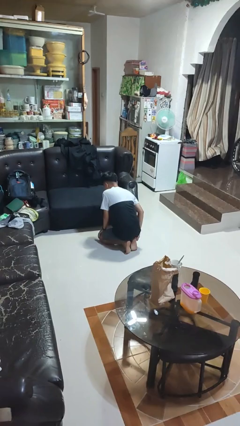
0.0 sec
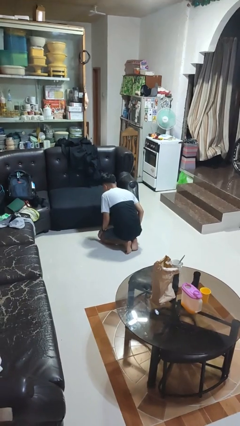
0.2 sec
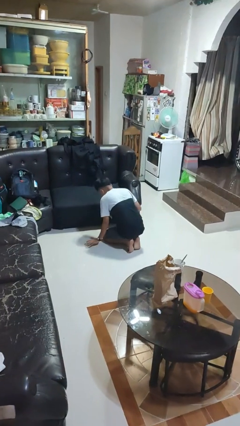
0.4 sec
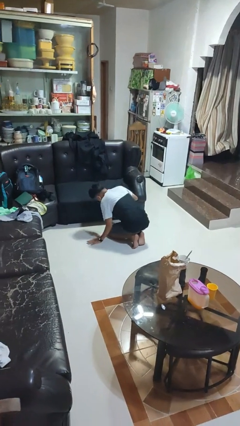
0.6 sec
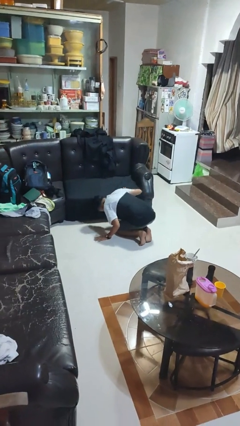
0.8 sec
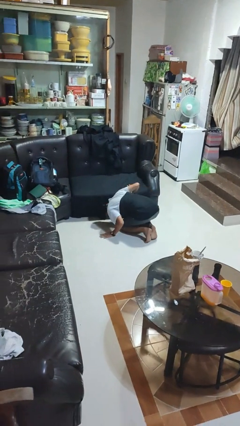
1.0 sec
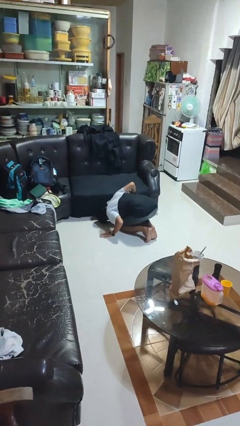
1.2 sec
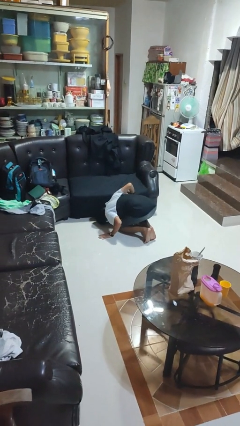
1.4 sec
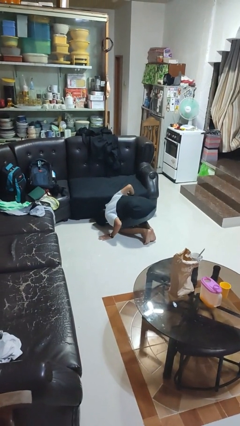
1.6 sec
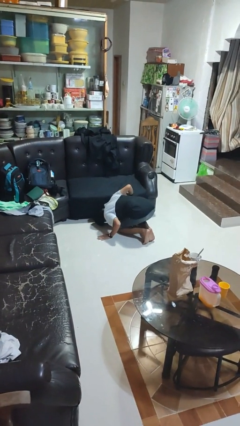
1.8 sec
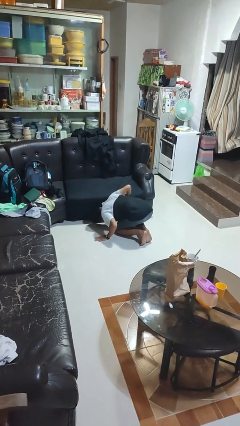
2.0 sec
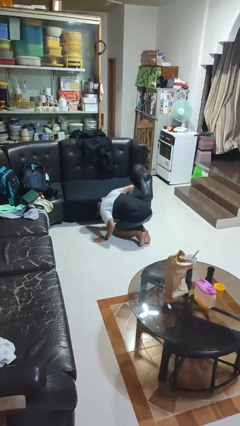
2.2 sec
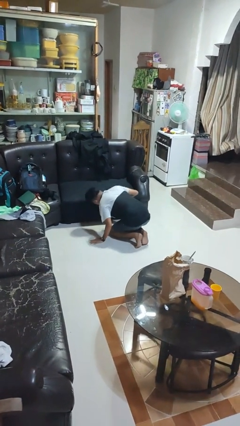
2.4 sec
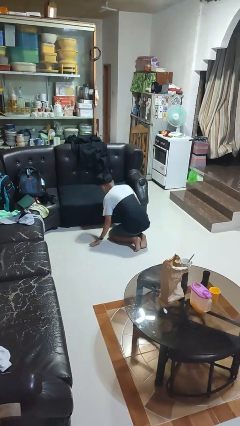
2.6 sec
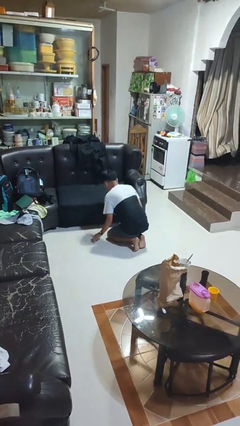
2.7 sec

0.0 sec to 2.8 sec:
person searches under couch

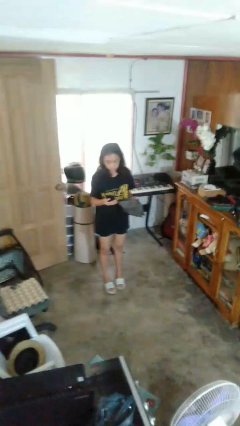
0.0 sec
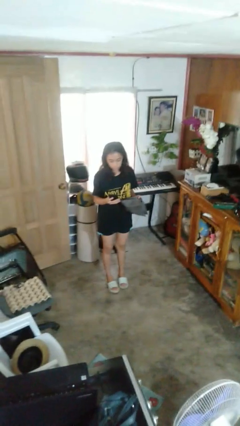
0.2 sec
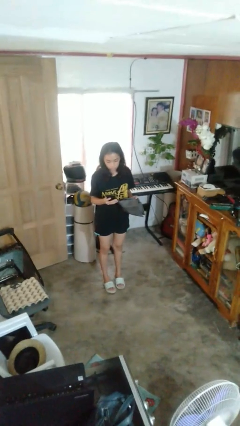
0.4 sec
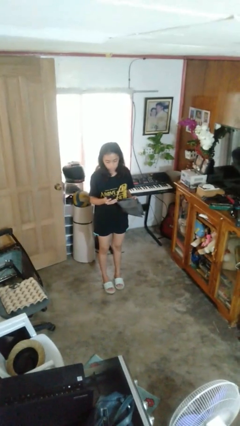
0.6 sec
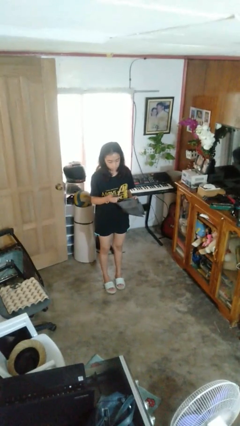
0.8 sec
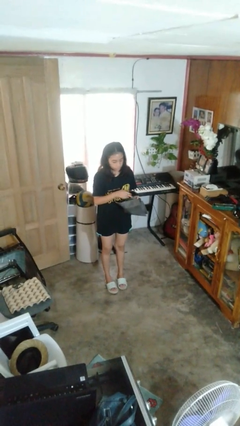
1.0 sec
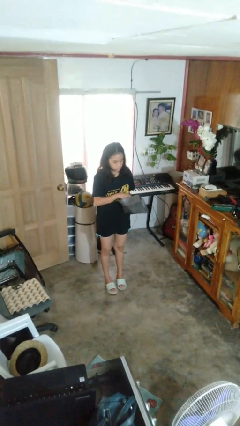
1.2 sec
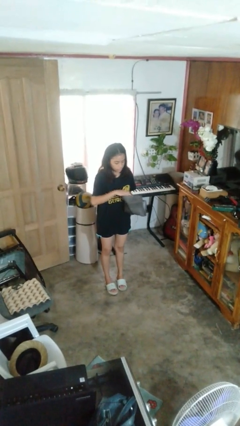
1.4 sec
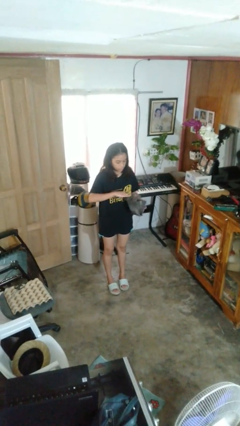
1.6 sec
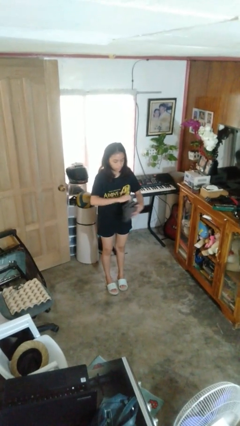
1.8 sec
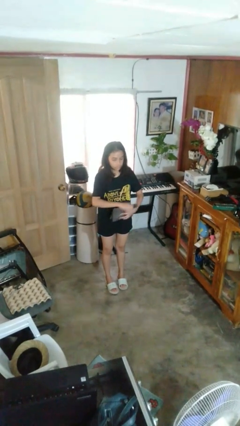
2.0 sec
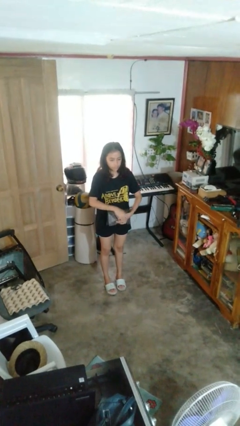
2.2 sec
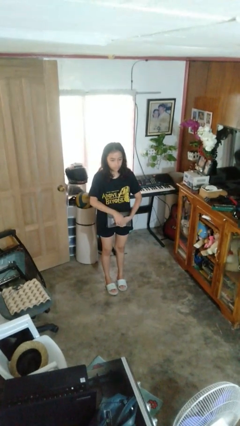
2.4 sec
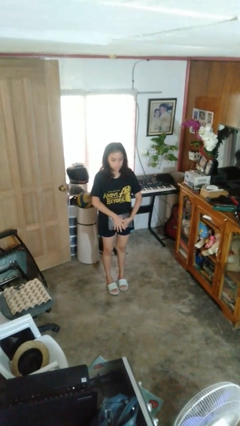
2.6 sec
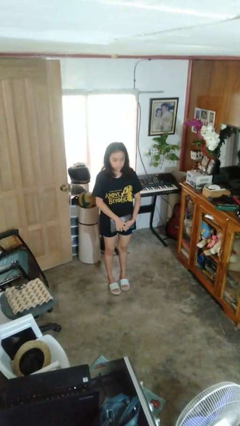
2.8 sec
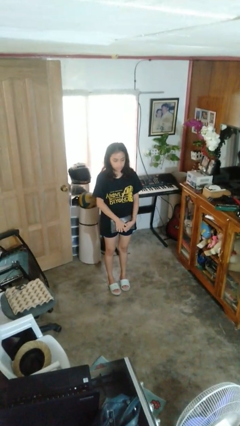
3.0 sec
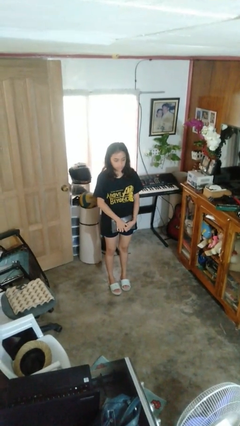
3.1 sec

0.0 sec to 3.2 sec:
person puts object into purse

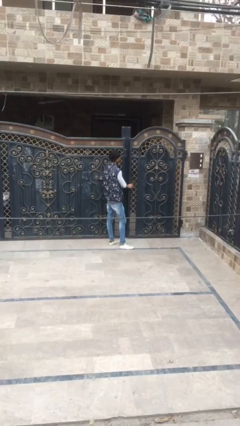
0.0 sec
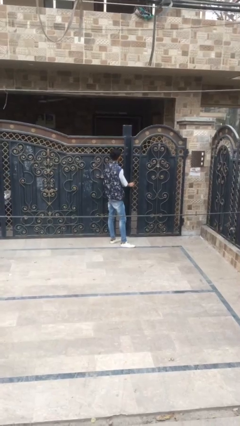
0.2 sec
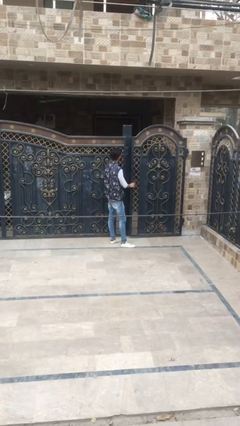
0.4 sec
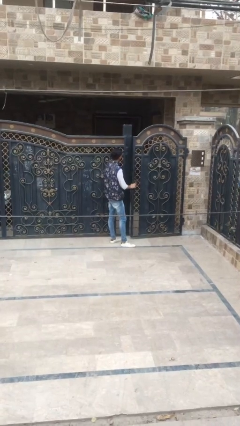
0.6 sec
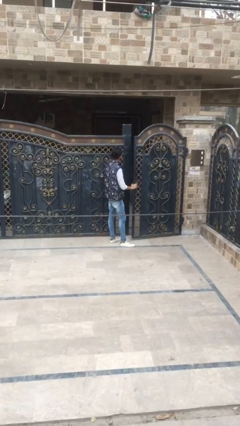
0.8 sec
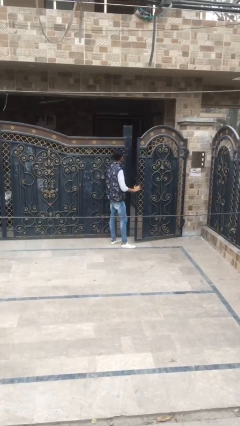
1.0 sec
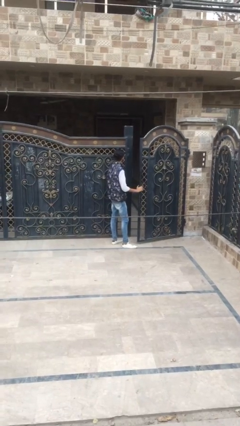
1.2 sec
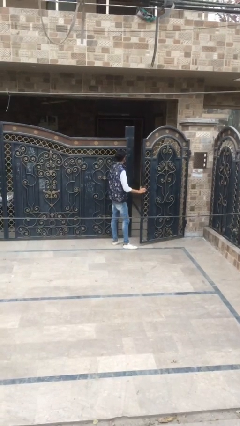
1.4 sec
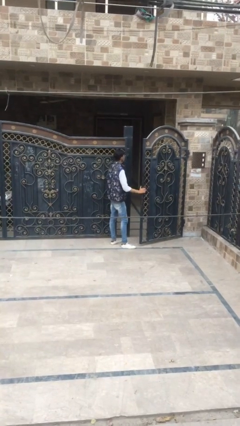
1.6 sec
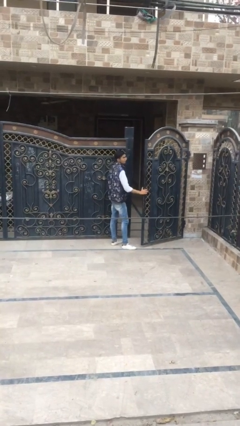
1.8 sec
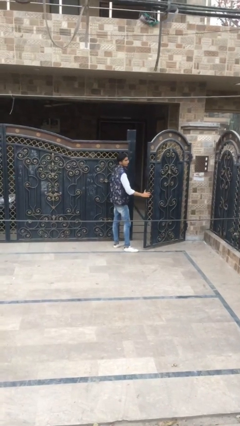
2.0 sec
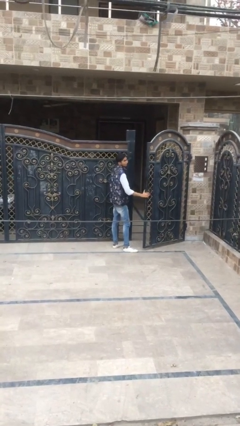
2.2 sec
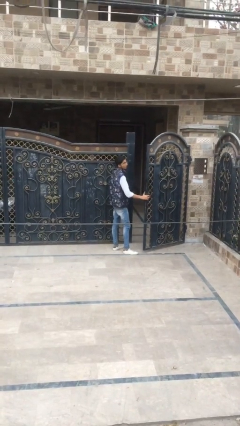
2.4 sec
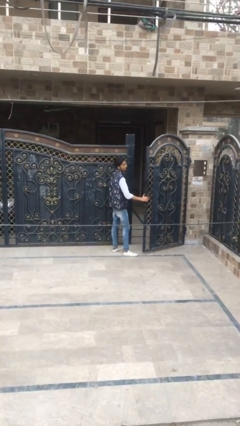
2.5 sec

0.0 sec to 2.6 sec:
person opens facility door

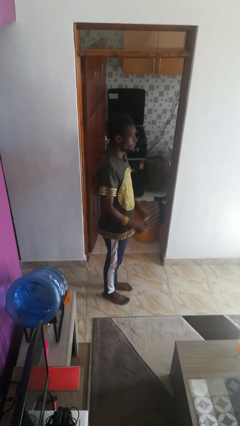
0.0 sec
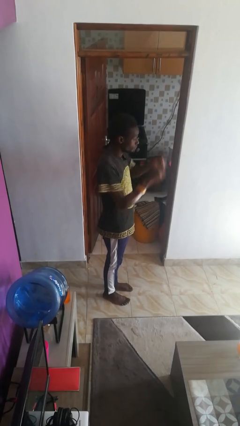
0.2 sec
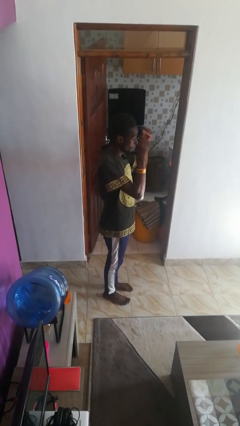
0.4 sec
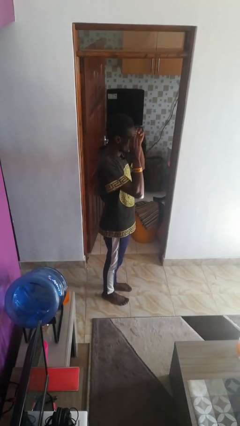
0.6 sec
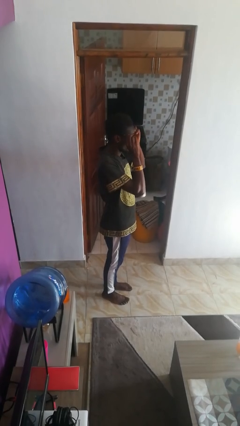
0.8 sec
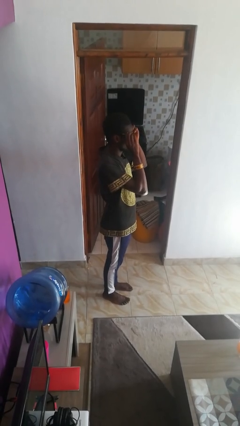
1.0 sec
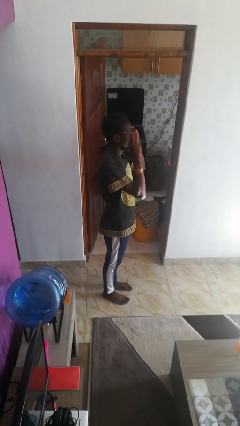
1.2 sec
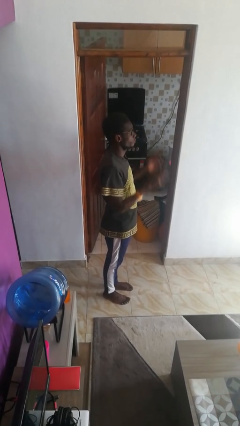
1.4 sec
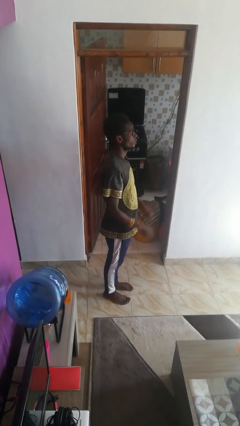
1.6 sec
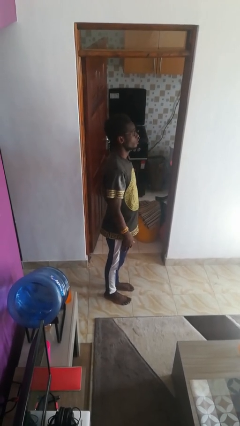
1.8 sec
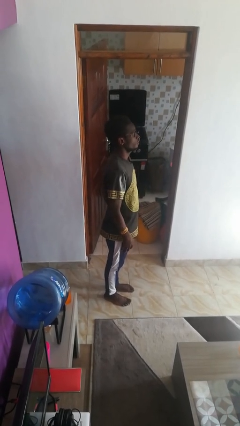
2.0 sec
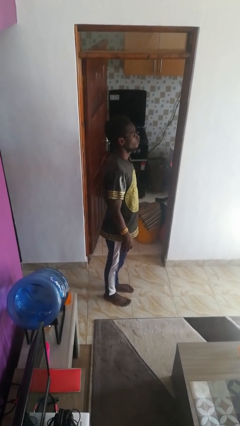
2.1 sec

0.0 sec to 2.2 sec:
person puts on glasses

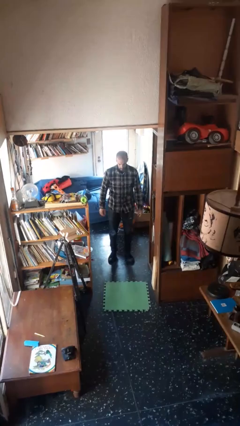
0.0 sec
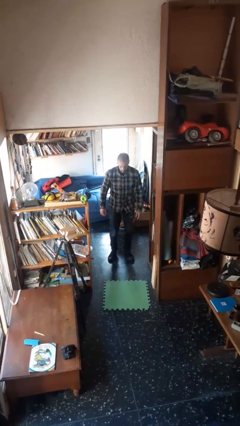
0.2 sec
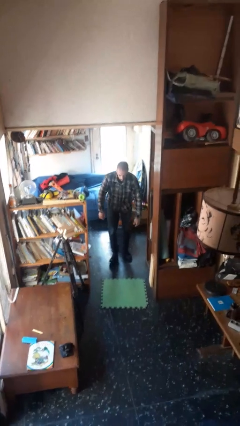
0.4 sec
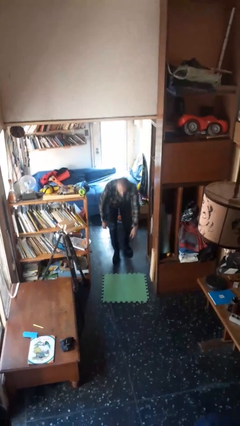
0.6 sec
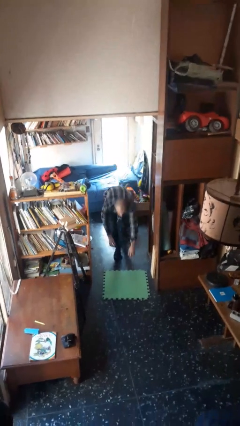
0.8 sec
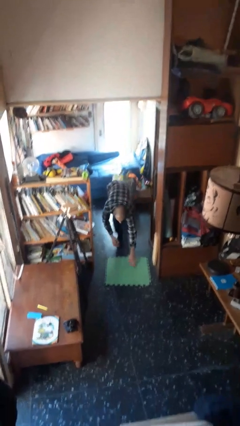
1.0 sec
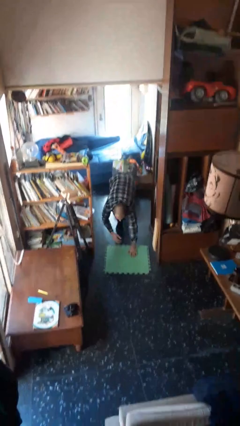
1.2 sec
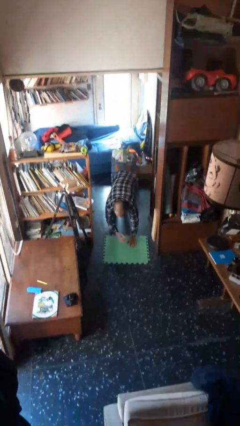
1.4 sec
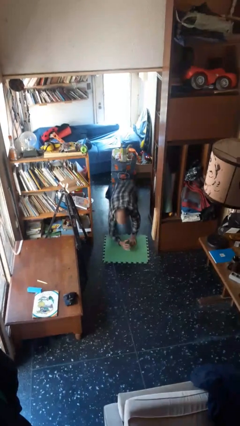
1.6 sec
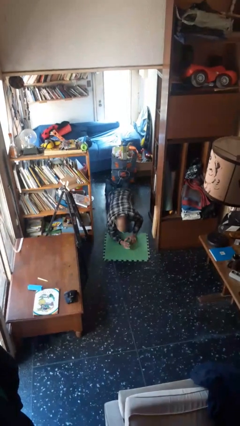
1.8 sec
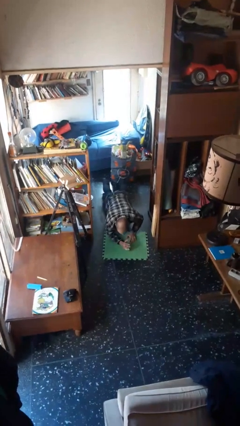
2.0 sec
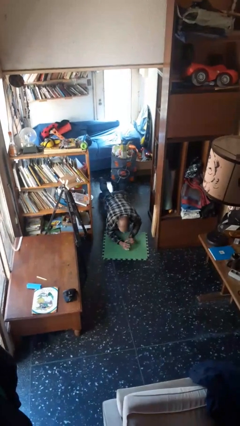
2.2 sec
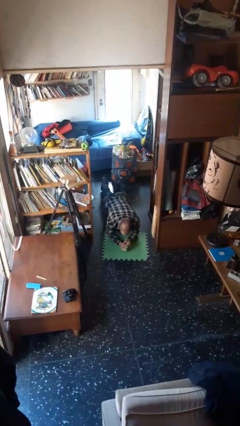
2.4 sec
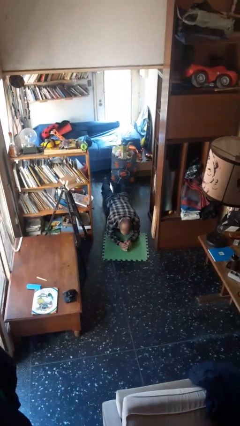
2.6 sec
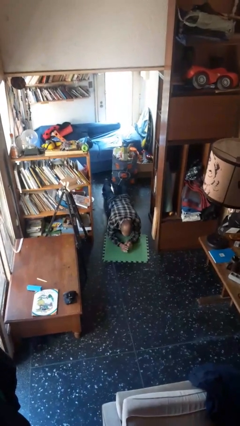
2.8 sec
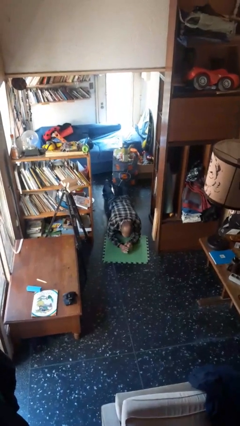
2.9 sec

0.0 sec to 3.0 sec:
person exercises with plank

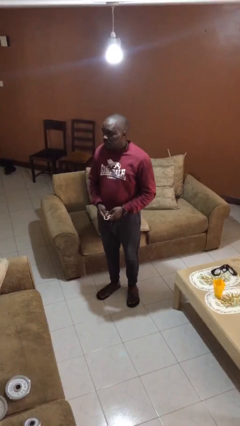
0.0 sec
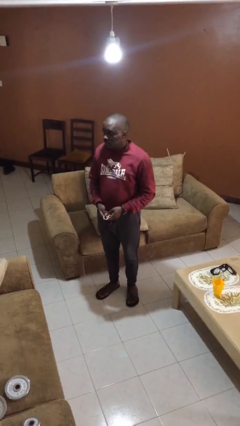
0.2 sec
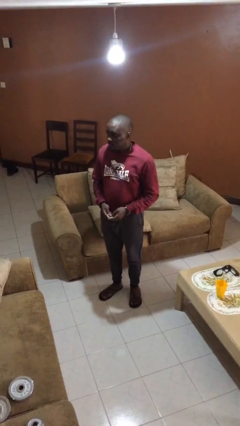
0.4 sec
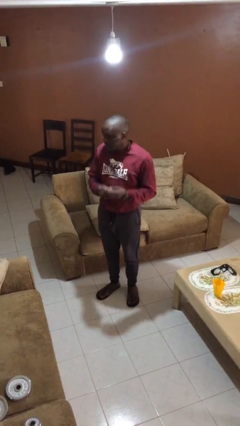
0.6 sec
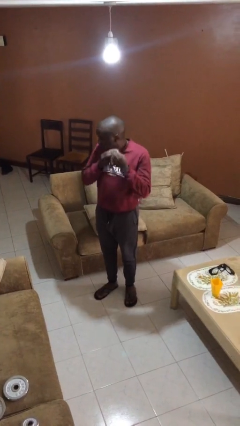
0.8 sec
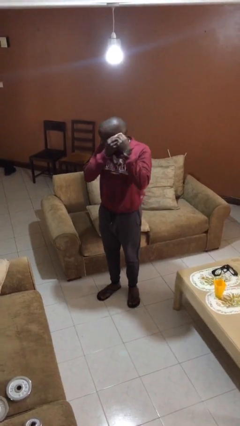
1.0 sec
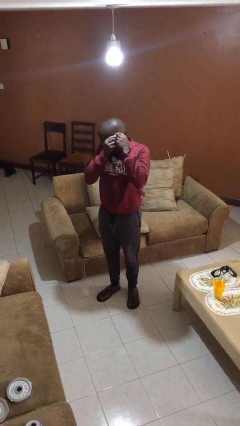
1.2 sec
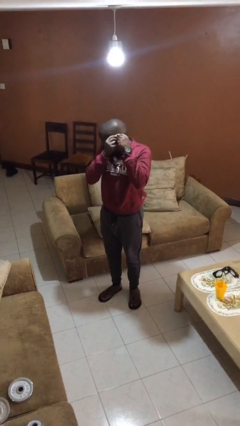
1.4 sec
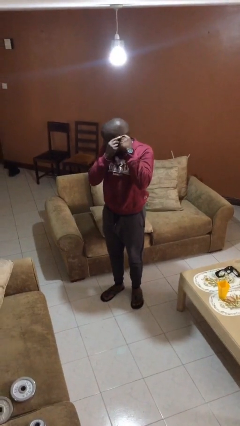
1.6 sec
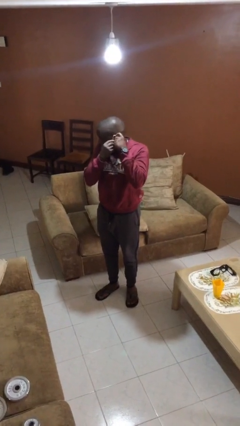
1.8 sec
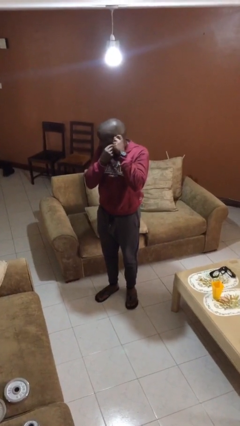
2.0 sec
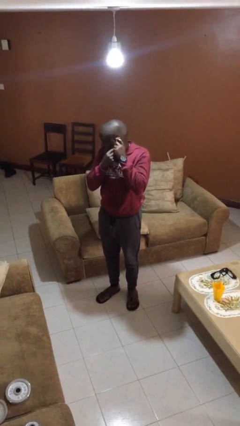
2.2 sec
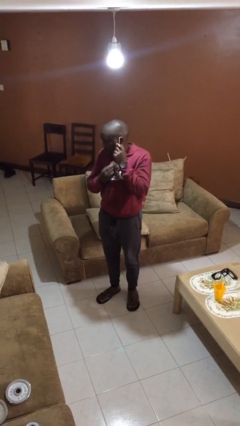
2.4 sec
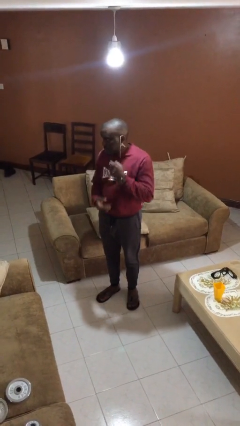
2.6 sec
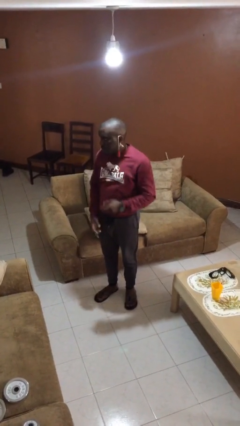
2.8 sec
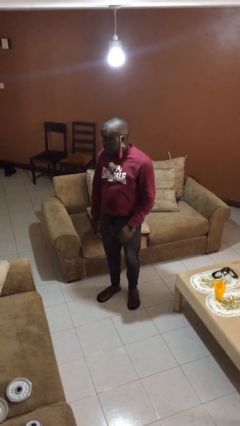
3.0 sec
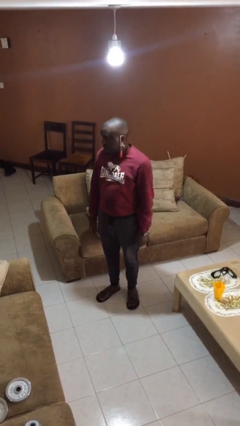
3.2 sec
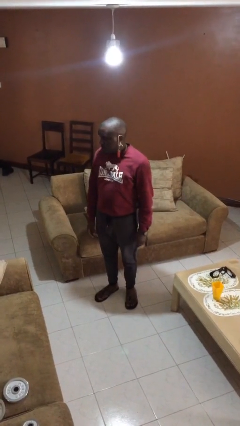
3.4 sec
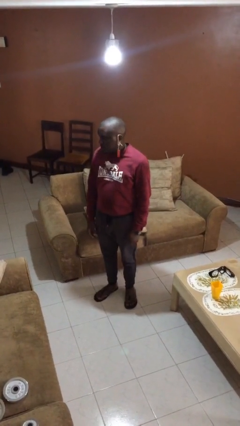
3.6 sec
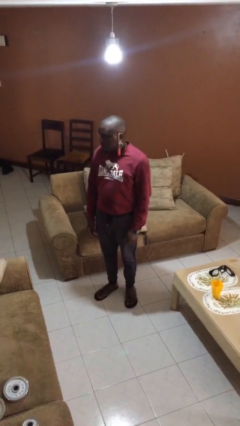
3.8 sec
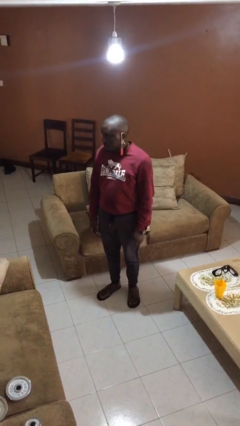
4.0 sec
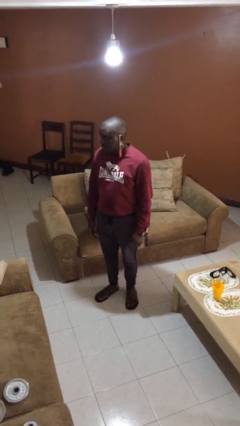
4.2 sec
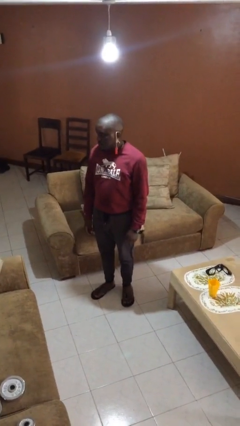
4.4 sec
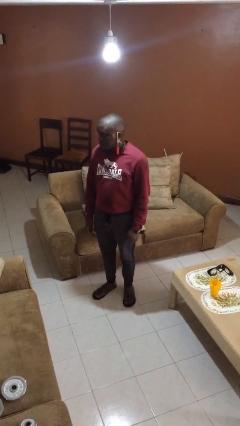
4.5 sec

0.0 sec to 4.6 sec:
person puts on earrings
